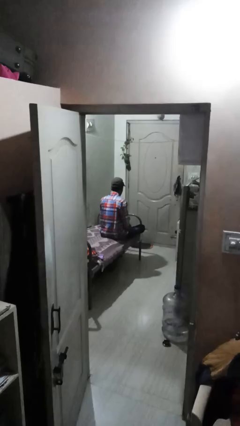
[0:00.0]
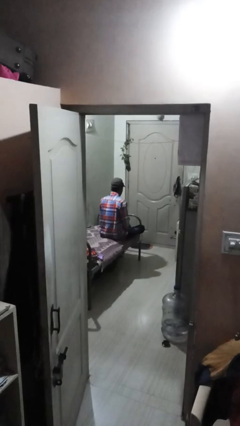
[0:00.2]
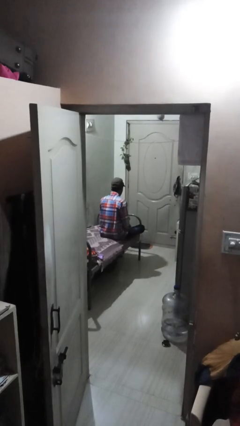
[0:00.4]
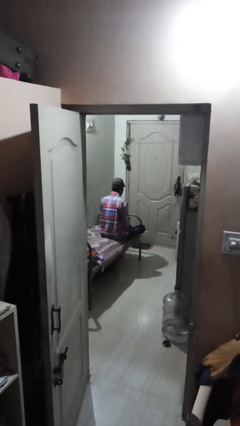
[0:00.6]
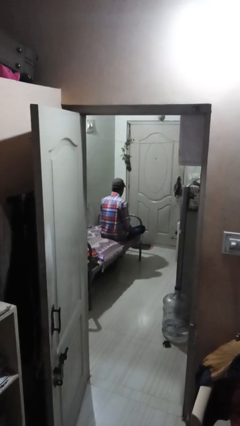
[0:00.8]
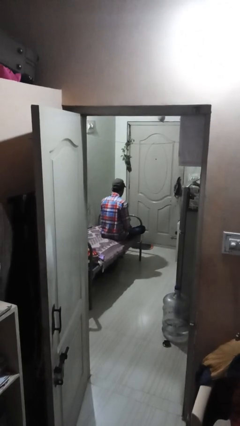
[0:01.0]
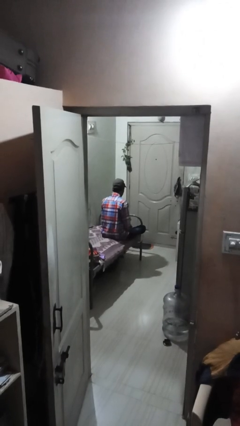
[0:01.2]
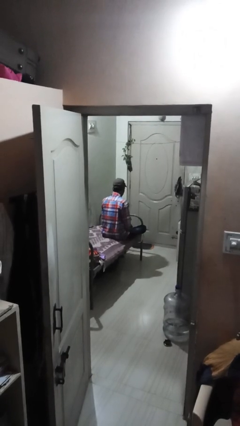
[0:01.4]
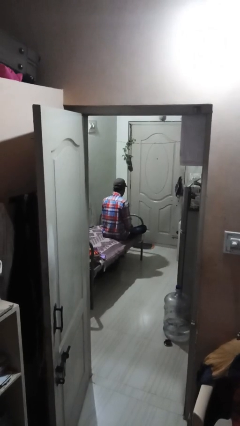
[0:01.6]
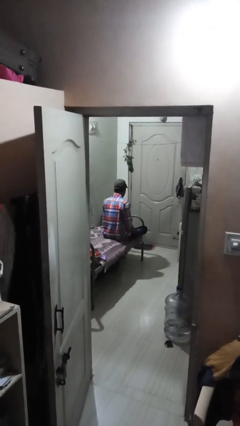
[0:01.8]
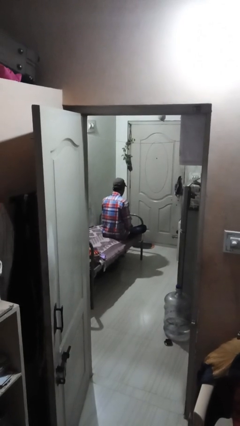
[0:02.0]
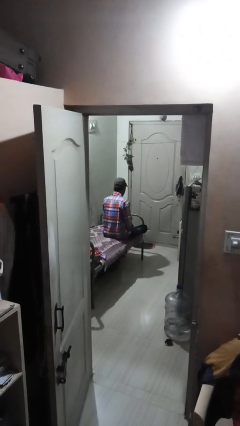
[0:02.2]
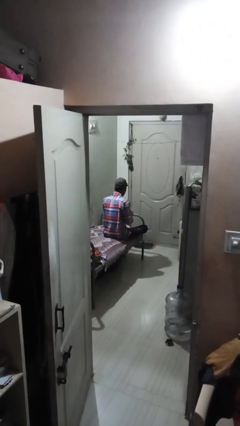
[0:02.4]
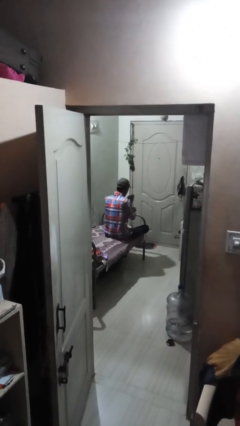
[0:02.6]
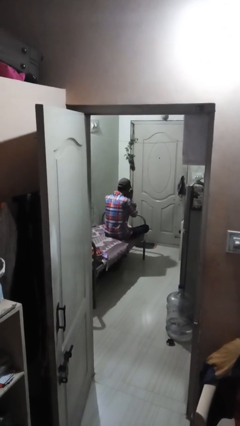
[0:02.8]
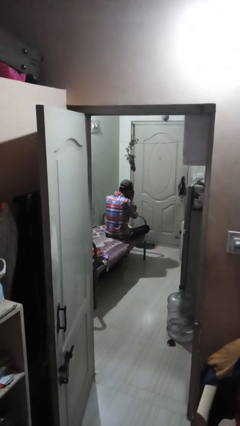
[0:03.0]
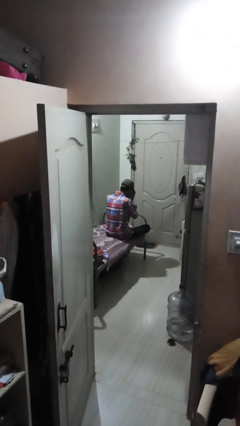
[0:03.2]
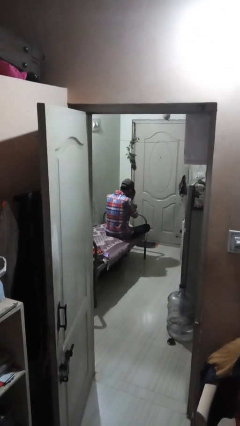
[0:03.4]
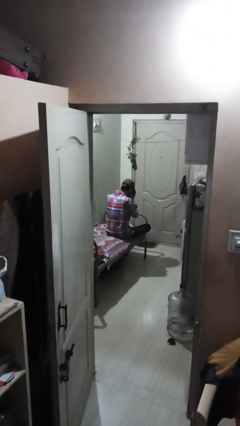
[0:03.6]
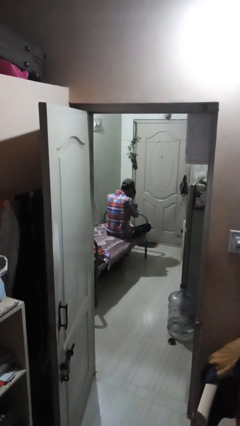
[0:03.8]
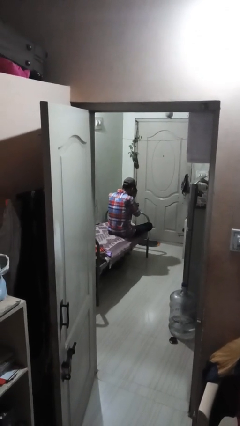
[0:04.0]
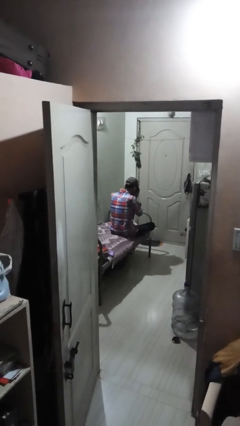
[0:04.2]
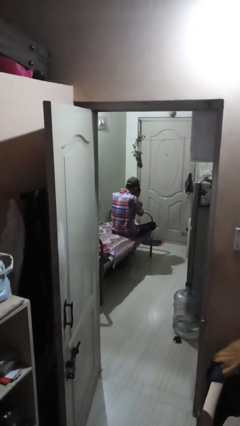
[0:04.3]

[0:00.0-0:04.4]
person prays

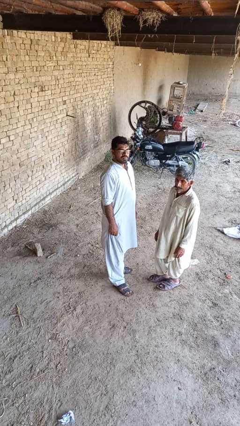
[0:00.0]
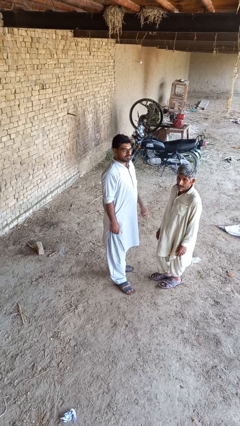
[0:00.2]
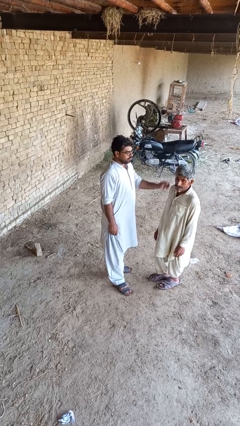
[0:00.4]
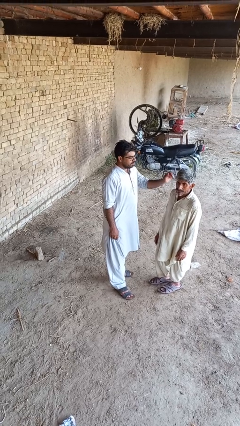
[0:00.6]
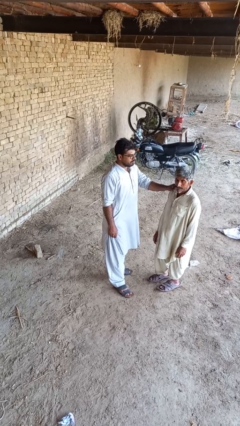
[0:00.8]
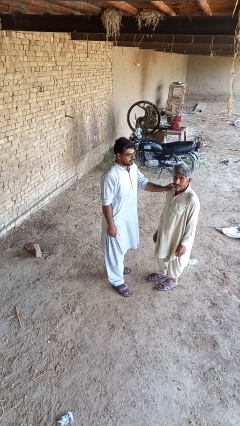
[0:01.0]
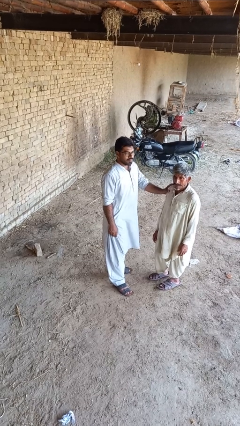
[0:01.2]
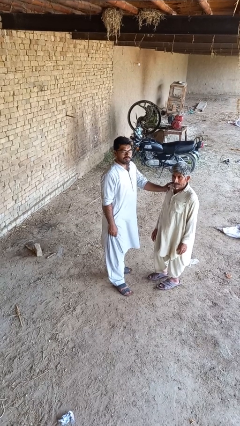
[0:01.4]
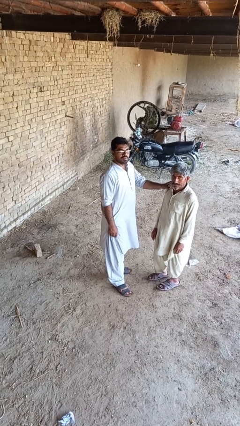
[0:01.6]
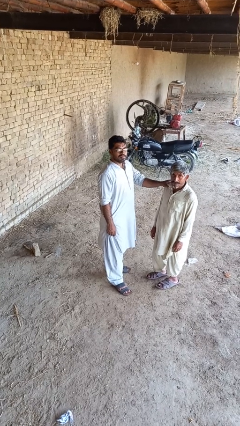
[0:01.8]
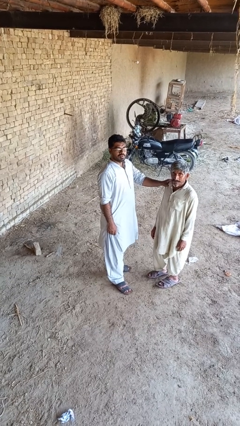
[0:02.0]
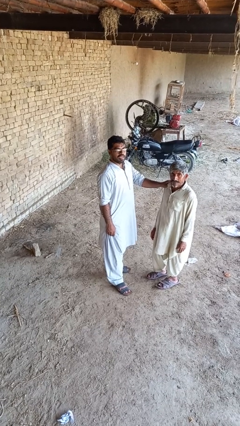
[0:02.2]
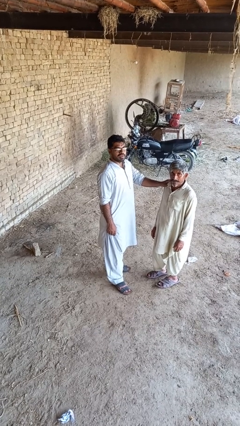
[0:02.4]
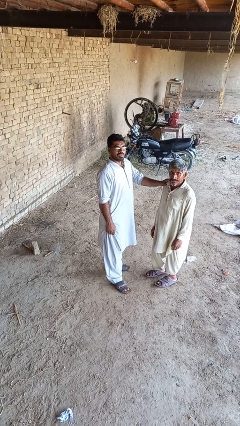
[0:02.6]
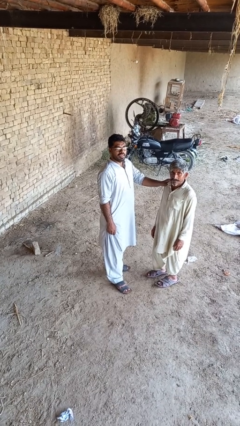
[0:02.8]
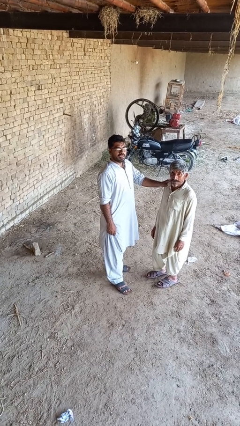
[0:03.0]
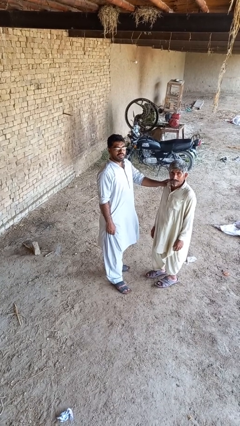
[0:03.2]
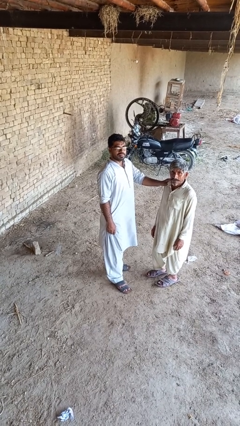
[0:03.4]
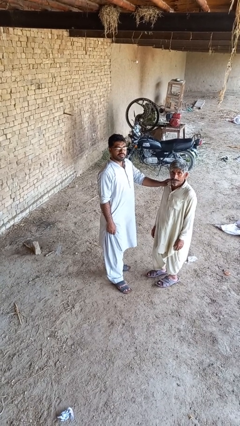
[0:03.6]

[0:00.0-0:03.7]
person grabs person by shoulder

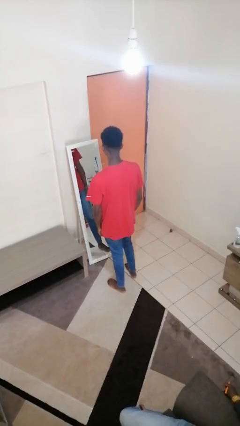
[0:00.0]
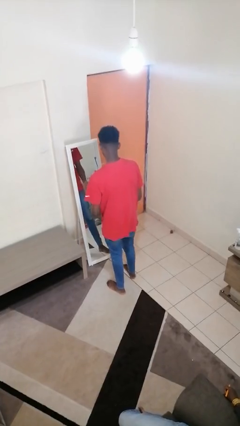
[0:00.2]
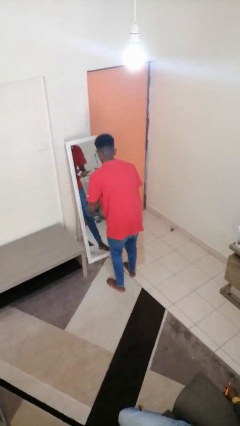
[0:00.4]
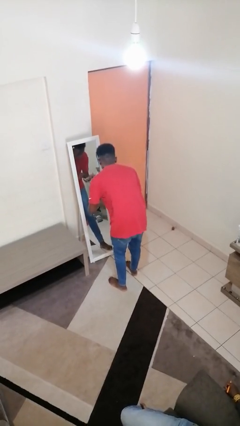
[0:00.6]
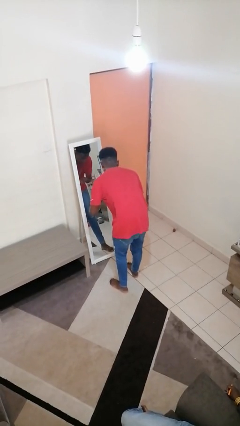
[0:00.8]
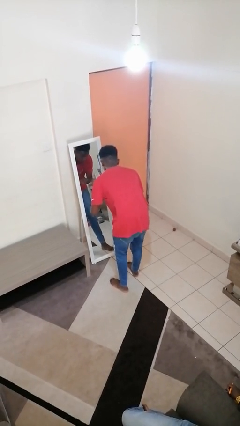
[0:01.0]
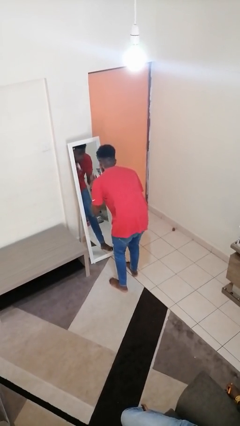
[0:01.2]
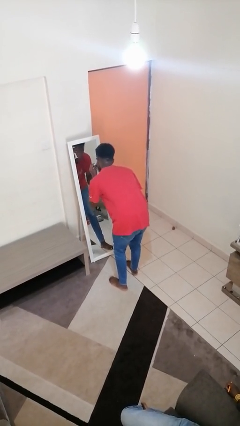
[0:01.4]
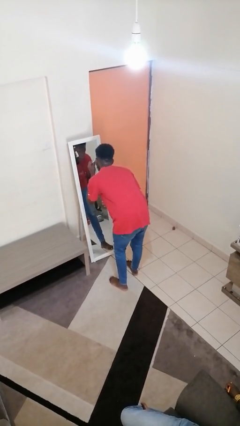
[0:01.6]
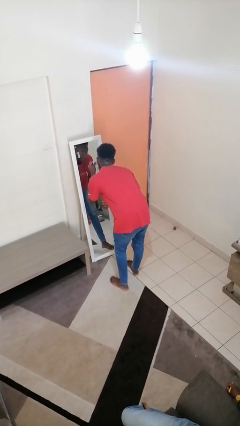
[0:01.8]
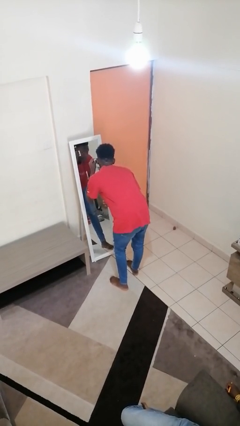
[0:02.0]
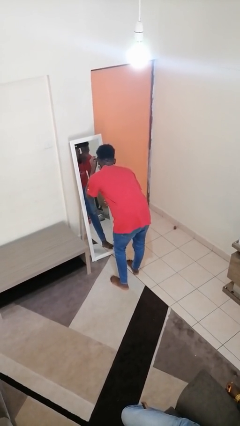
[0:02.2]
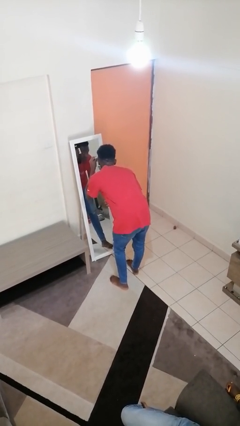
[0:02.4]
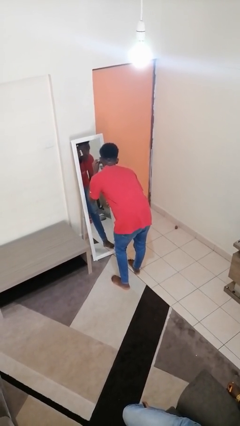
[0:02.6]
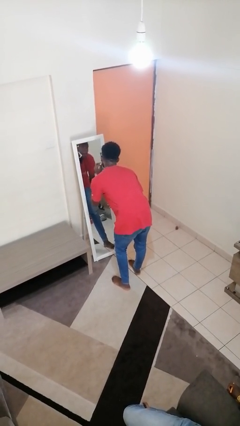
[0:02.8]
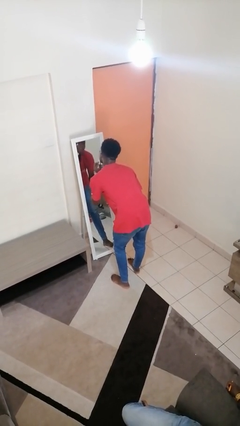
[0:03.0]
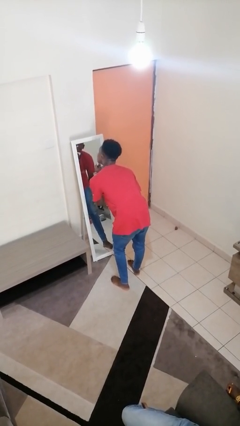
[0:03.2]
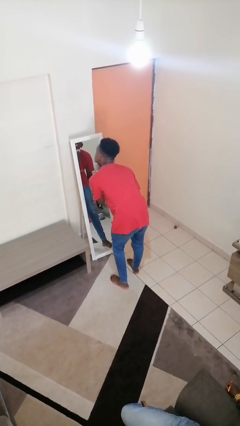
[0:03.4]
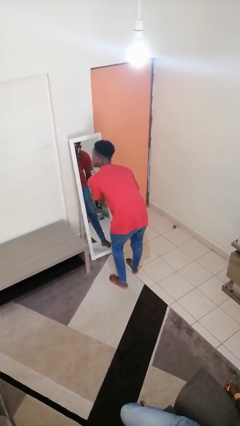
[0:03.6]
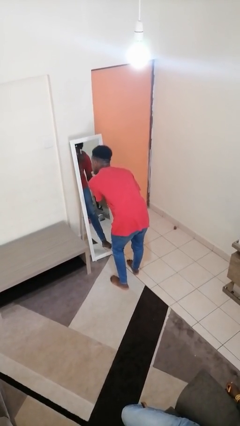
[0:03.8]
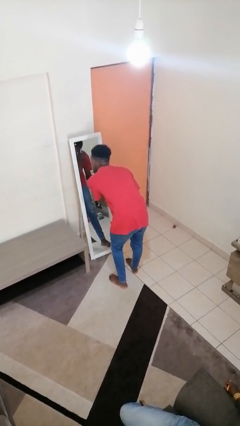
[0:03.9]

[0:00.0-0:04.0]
person applies foundation makeup

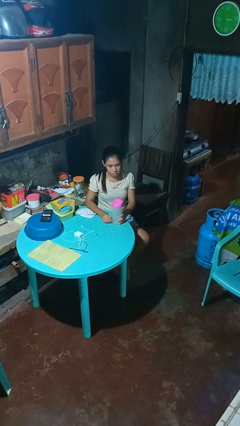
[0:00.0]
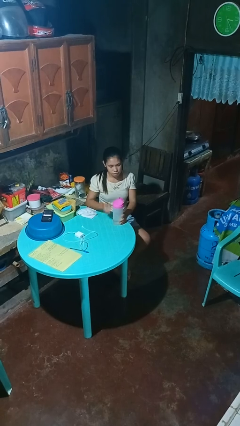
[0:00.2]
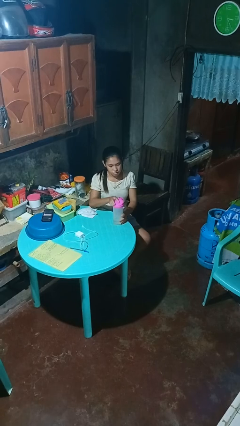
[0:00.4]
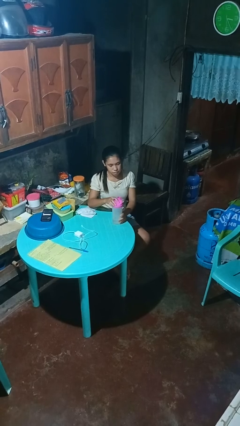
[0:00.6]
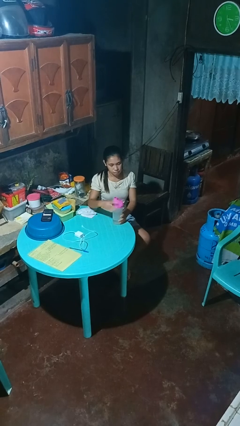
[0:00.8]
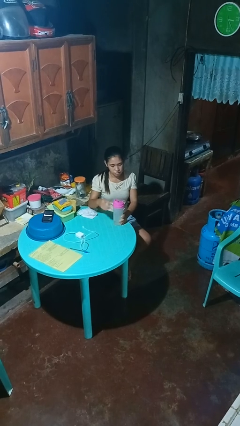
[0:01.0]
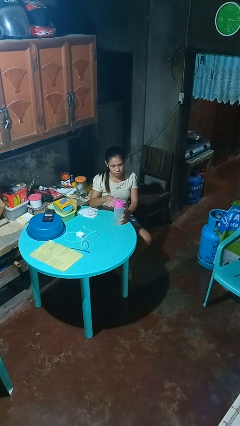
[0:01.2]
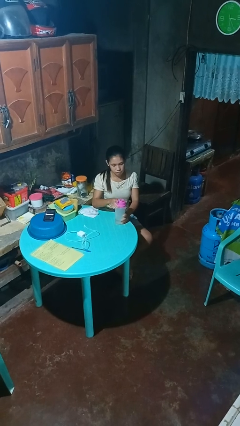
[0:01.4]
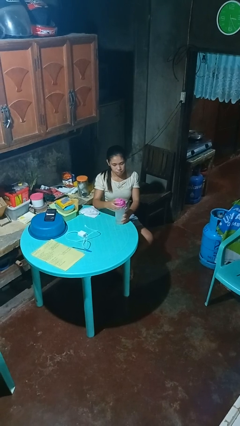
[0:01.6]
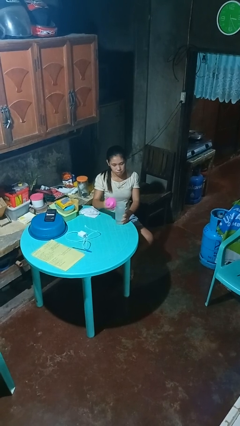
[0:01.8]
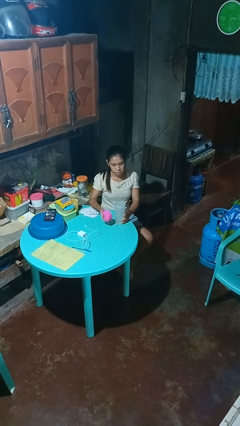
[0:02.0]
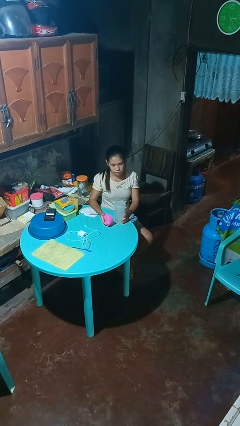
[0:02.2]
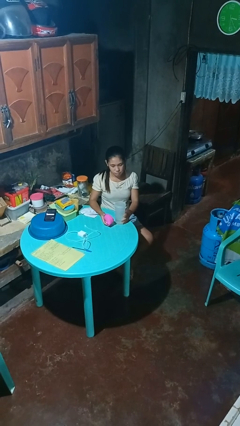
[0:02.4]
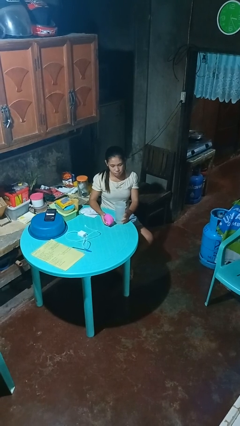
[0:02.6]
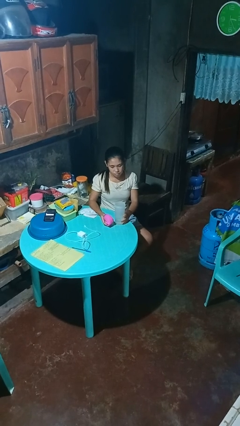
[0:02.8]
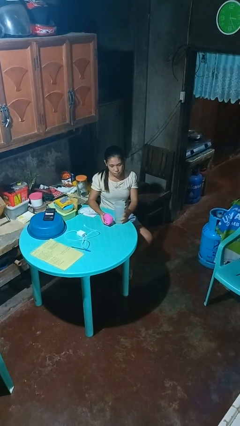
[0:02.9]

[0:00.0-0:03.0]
person unscrews lid from bottle

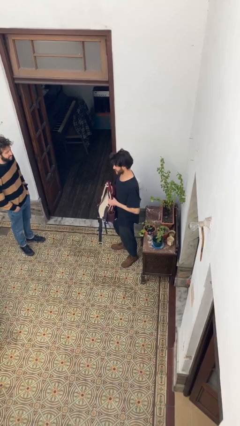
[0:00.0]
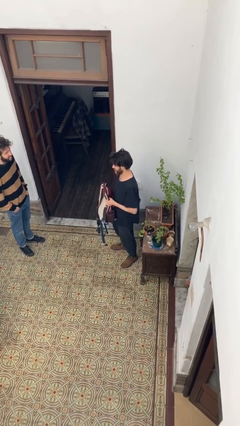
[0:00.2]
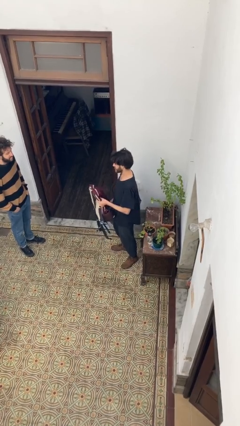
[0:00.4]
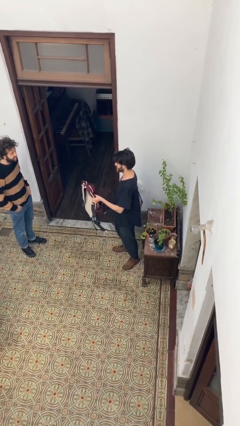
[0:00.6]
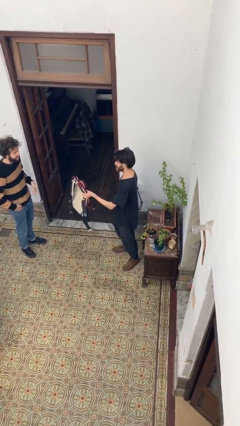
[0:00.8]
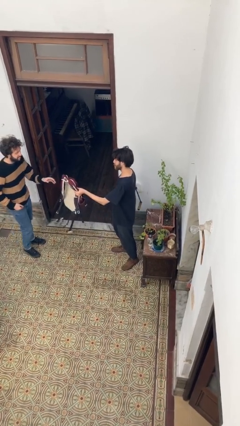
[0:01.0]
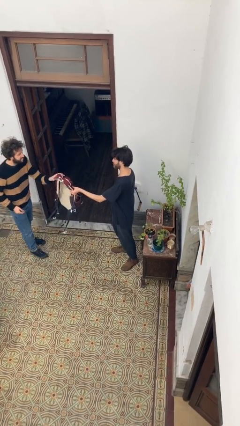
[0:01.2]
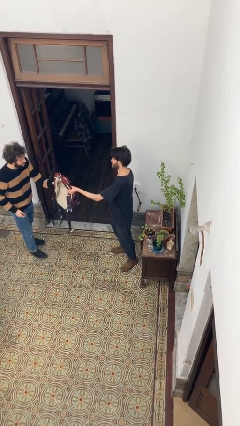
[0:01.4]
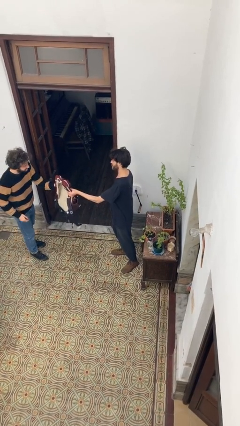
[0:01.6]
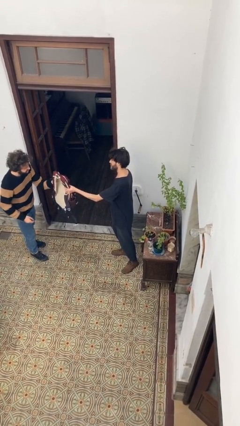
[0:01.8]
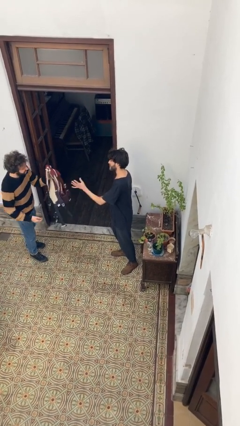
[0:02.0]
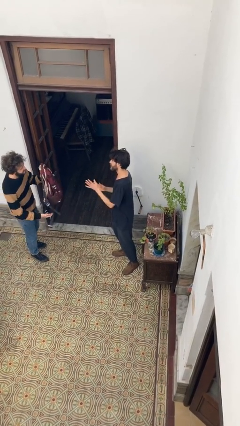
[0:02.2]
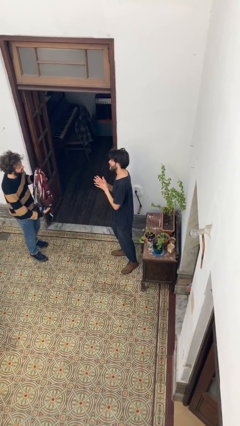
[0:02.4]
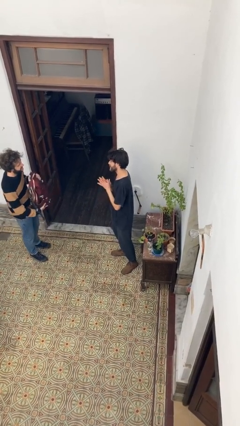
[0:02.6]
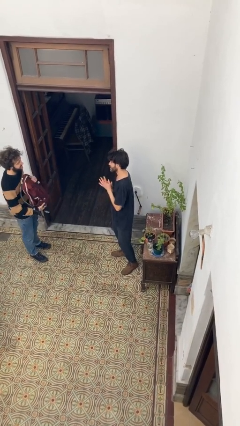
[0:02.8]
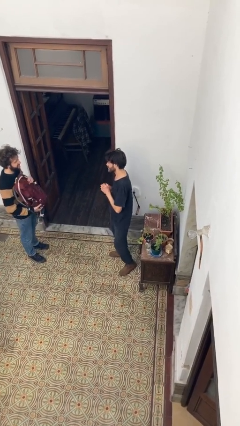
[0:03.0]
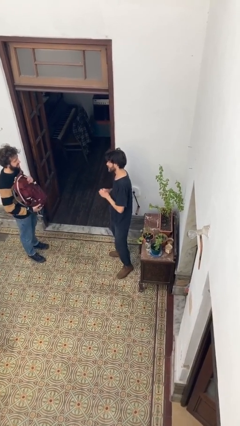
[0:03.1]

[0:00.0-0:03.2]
person transfers object to person
